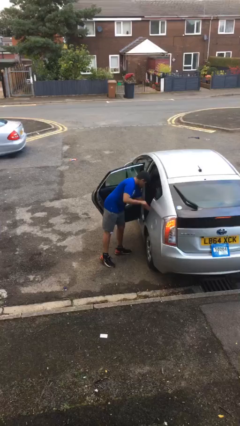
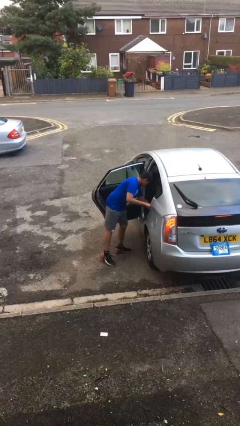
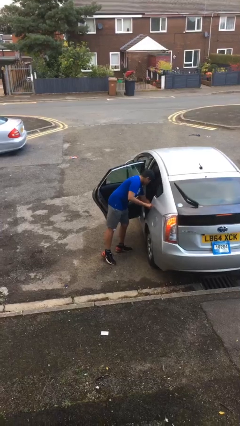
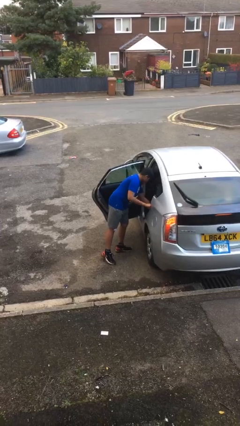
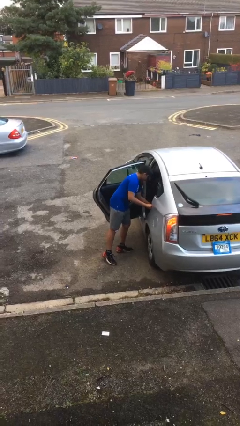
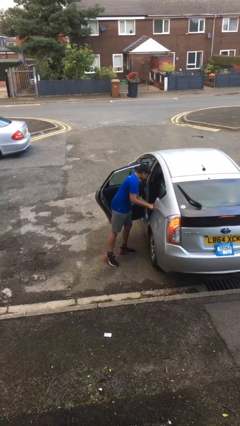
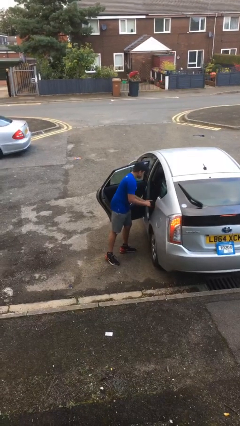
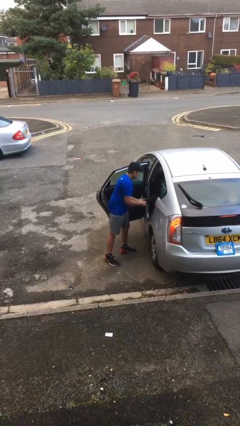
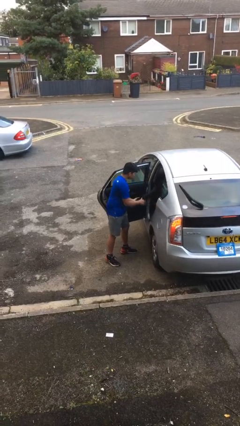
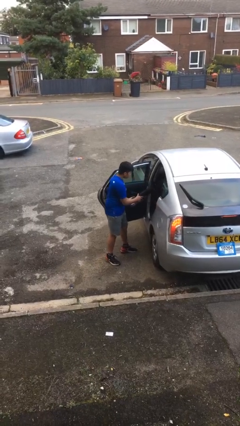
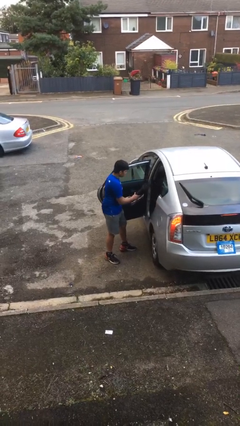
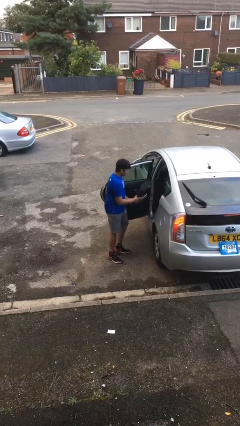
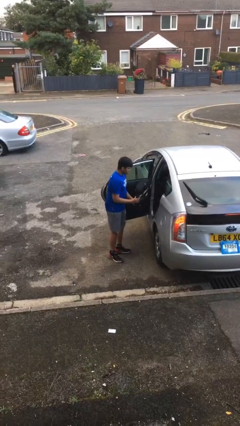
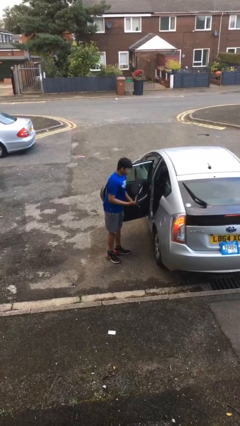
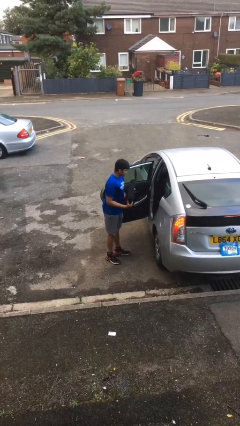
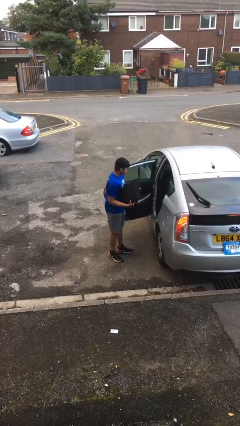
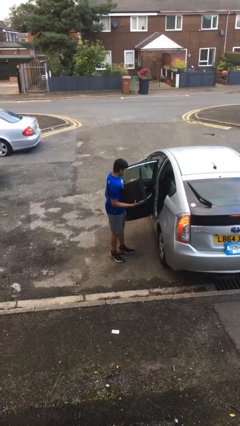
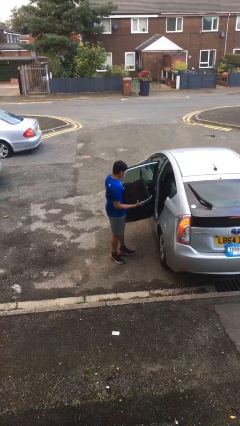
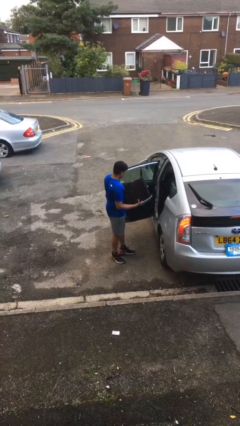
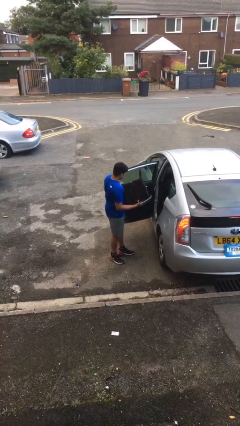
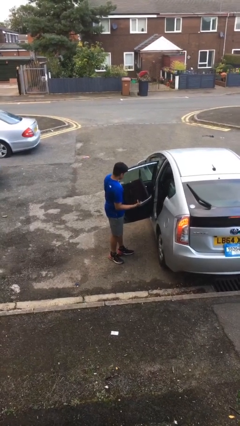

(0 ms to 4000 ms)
person unloads car

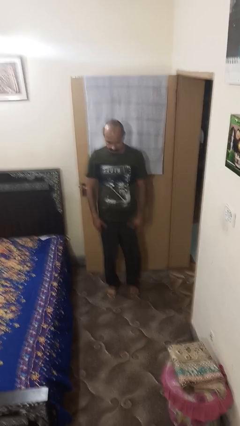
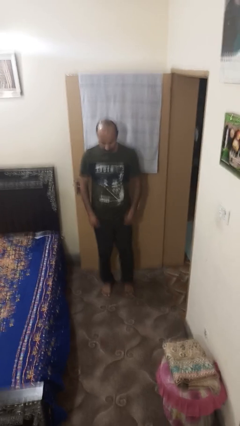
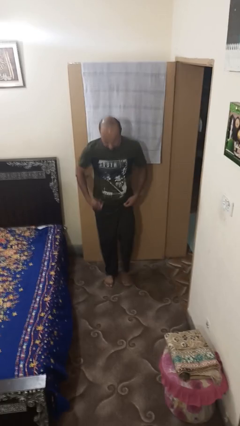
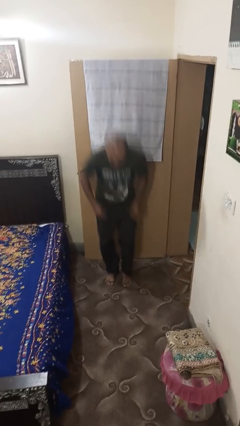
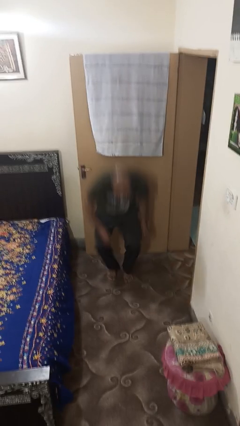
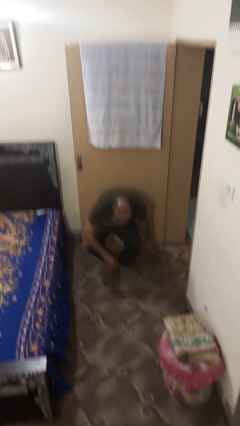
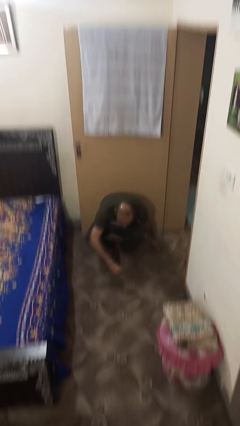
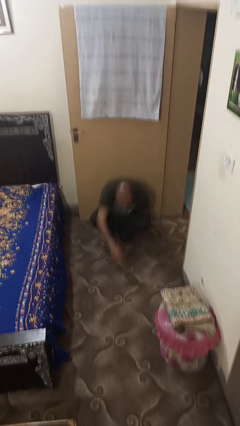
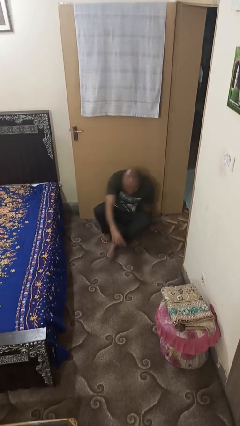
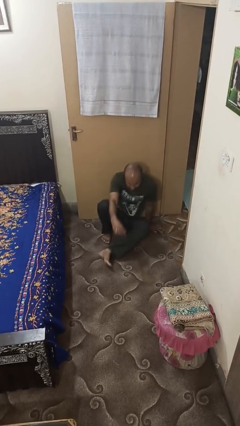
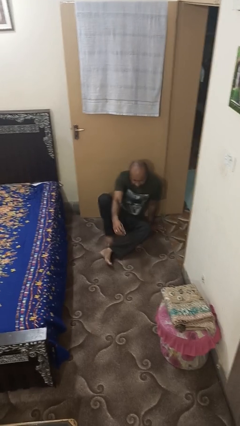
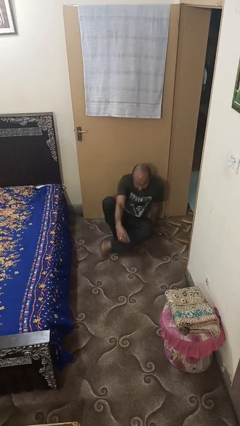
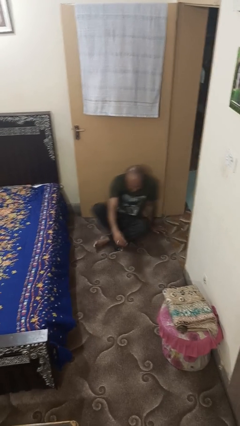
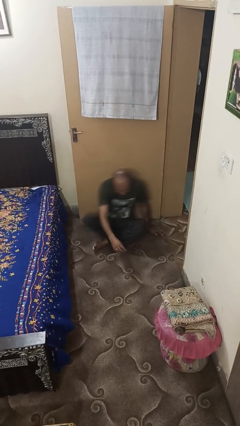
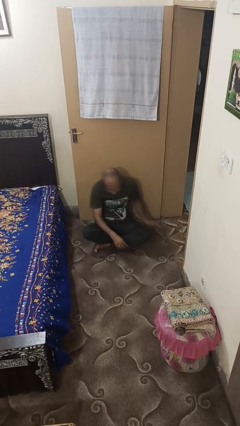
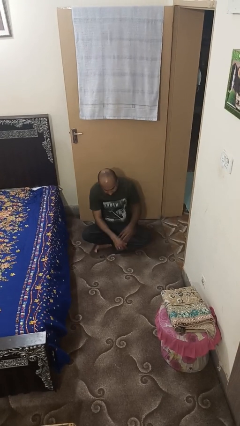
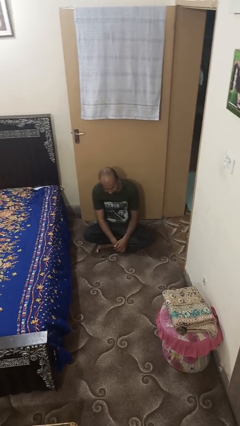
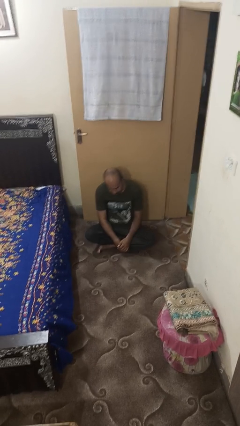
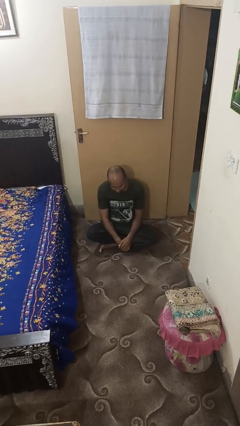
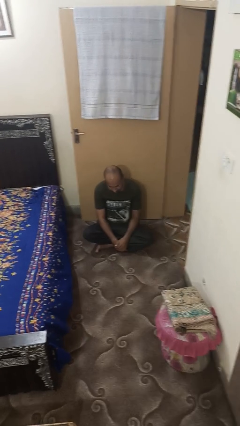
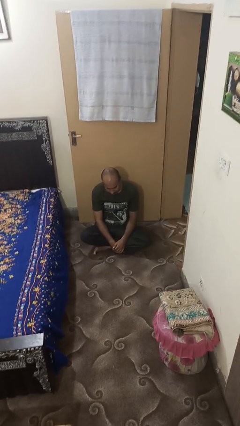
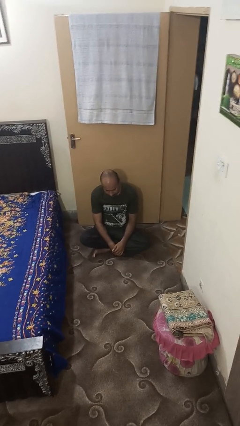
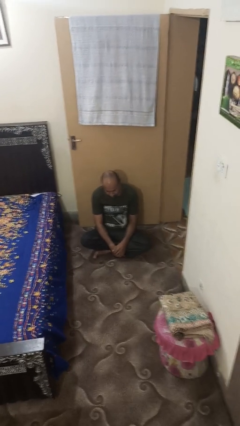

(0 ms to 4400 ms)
person sits crisscross

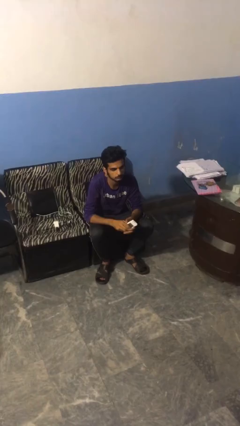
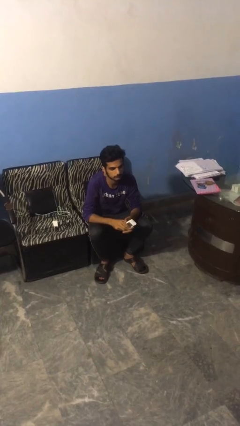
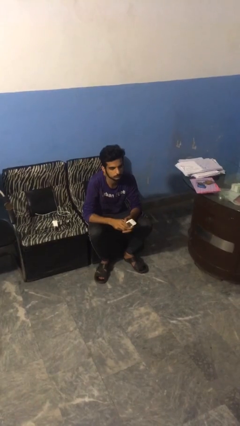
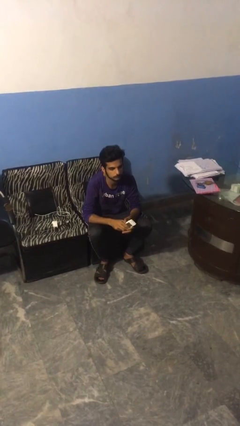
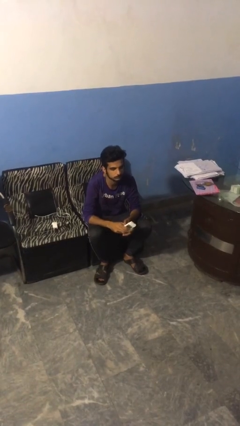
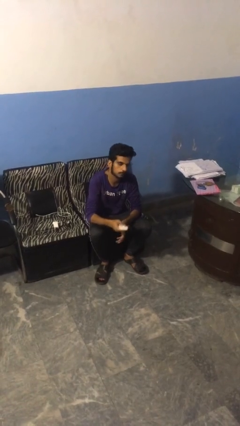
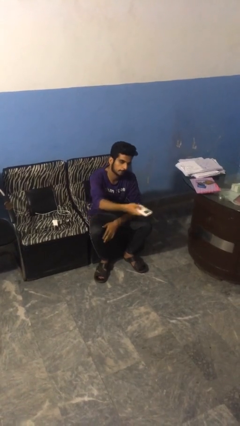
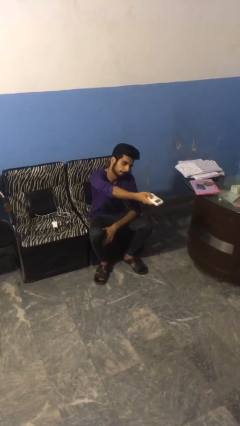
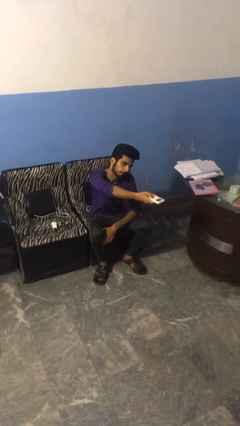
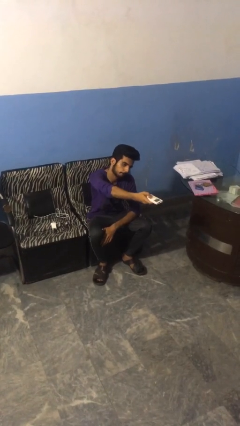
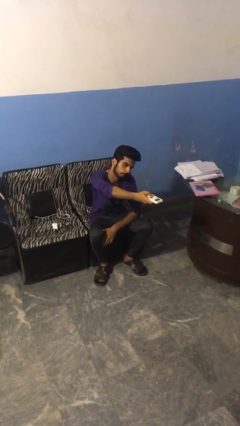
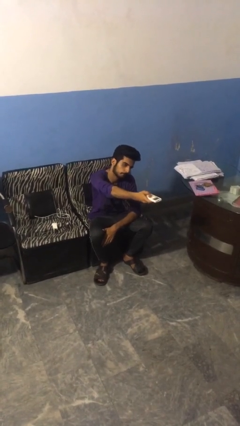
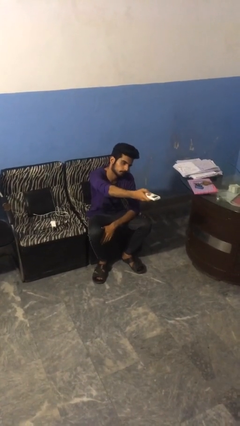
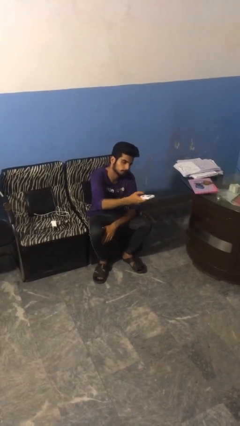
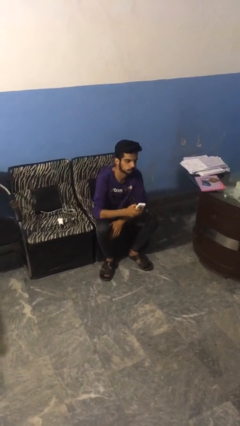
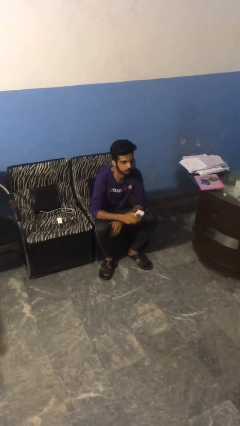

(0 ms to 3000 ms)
person uses television remote

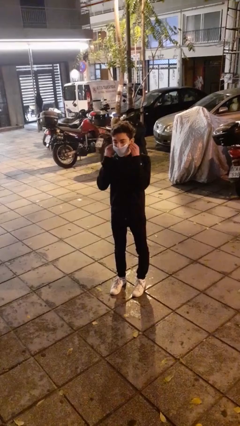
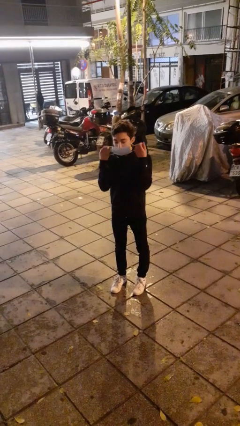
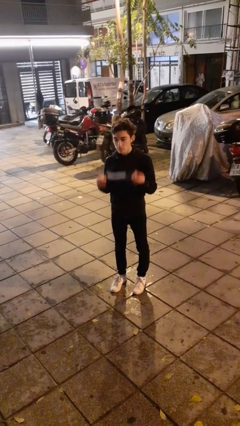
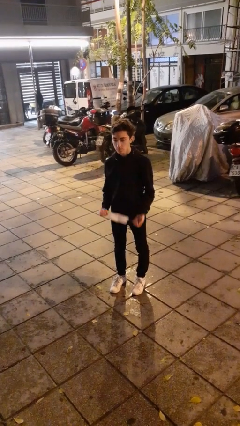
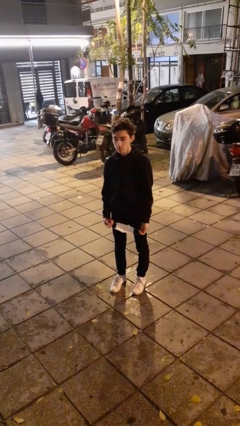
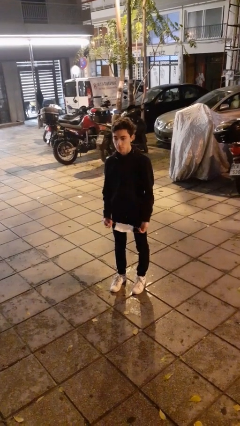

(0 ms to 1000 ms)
person takes off facemask

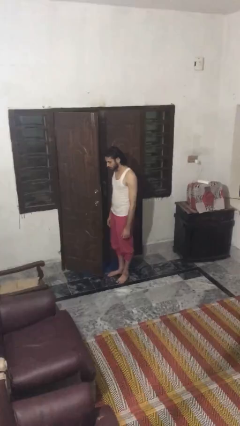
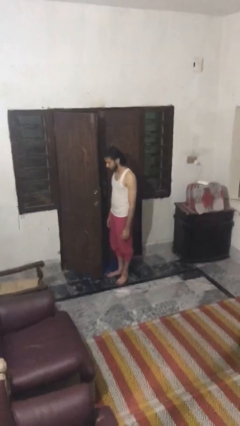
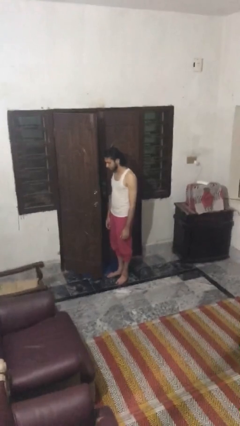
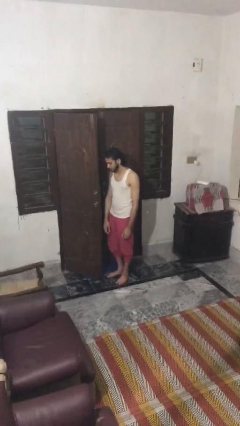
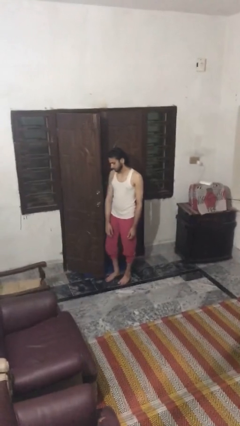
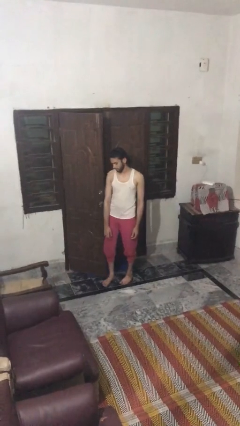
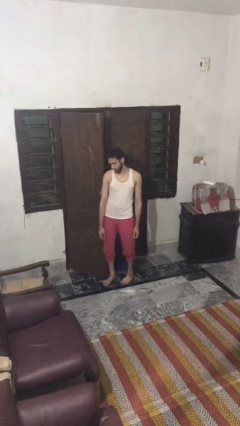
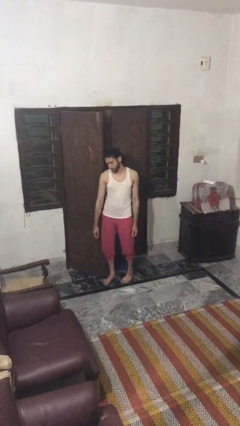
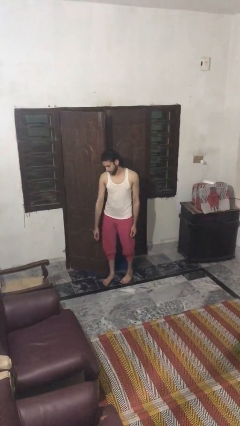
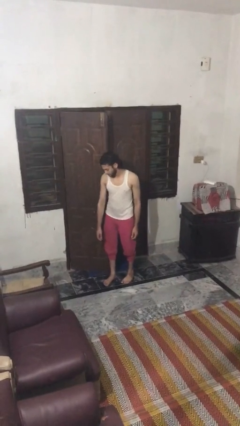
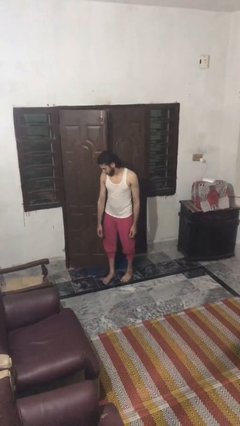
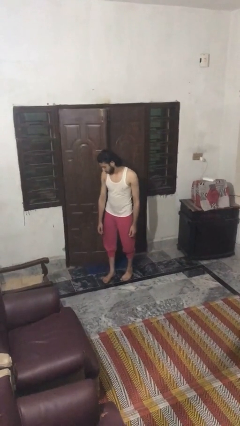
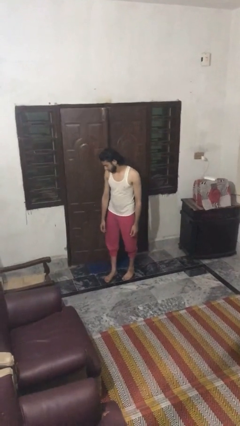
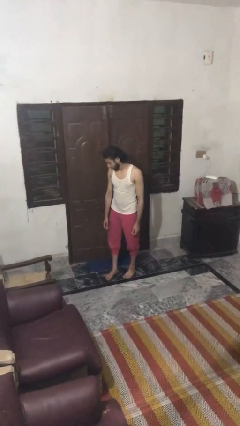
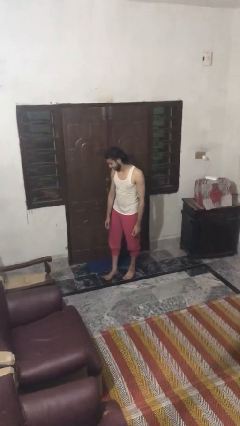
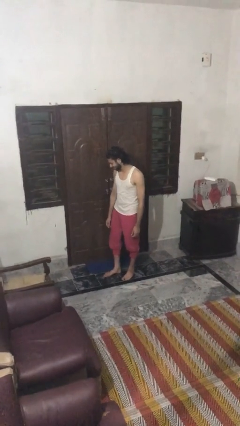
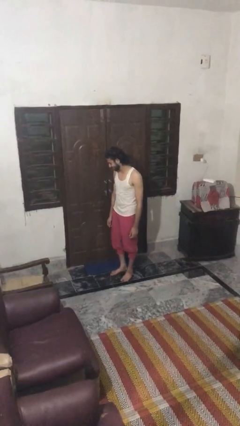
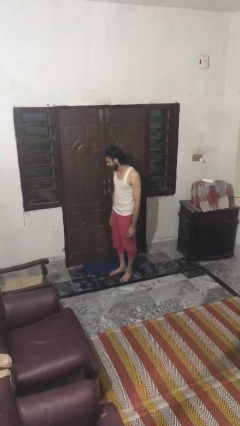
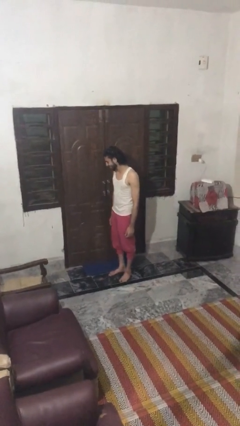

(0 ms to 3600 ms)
person closes door with hip

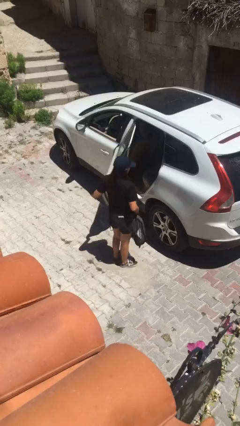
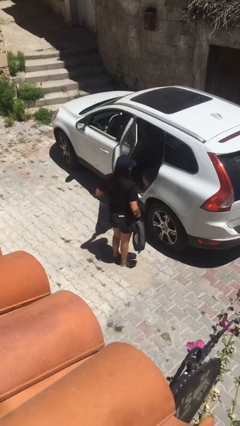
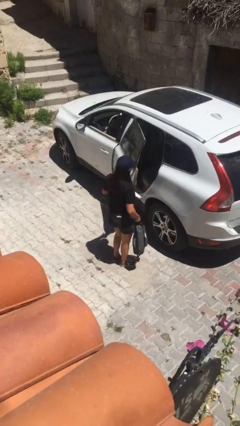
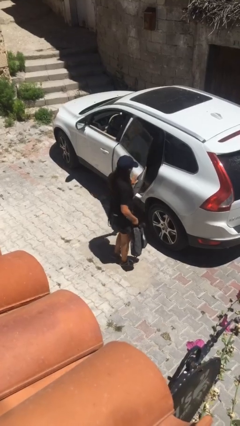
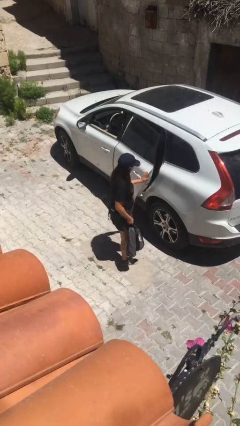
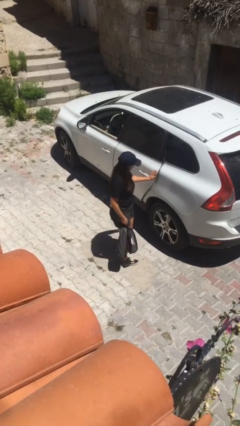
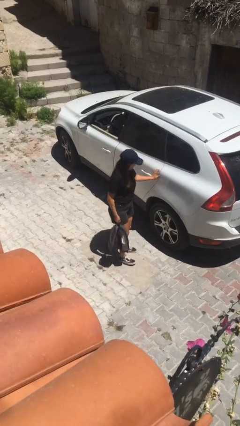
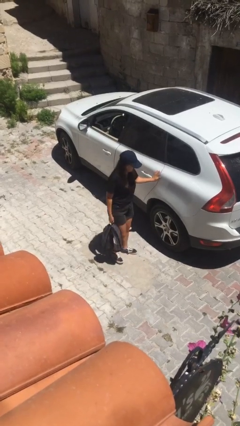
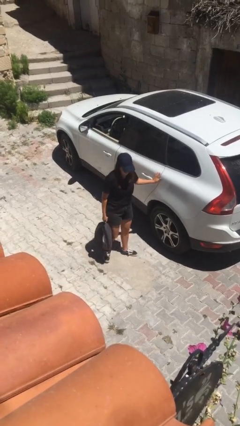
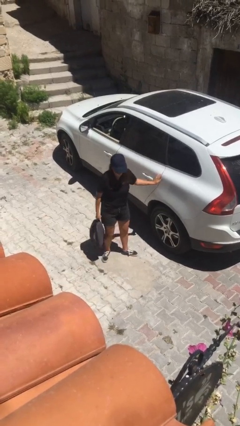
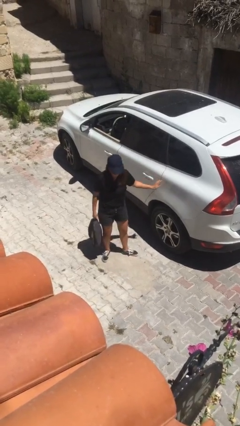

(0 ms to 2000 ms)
person closes car door
